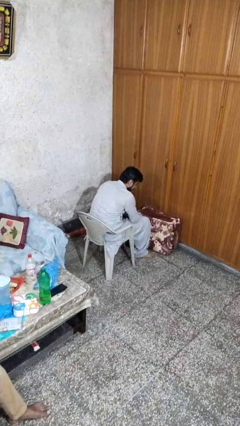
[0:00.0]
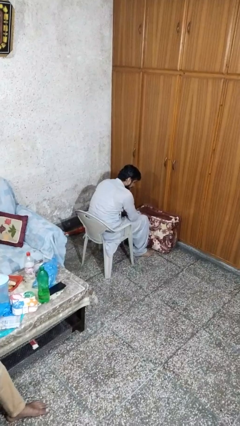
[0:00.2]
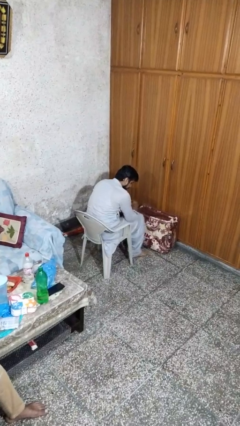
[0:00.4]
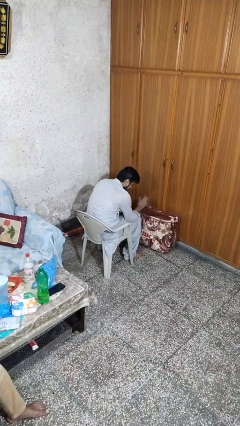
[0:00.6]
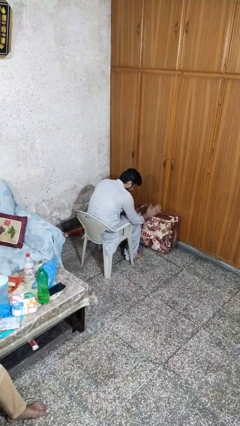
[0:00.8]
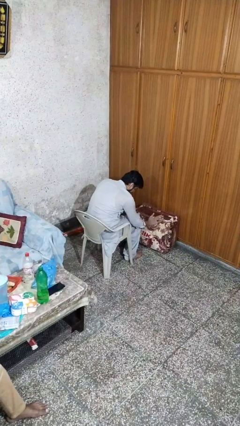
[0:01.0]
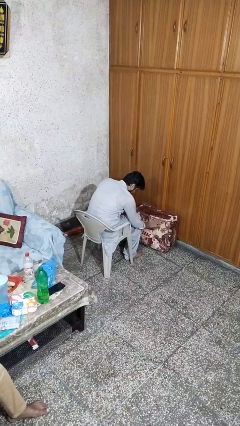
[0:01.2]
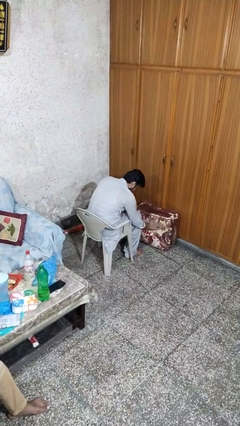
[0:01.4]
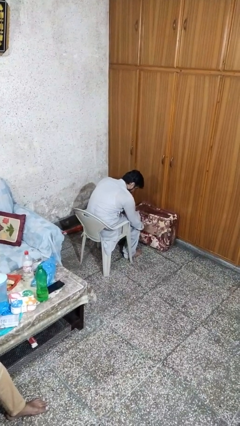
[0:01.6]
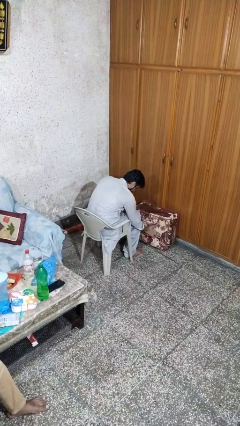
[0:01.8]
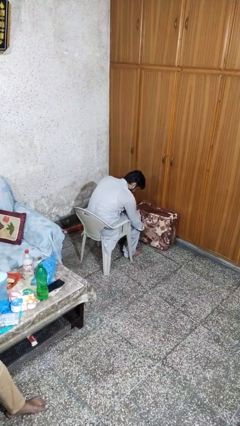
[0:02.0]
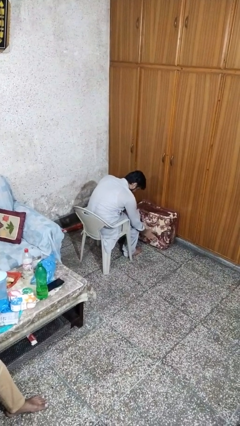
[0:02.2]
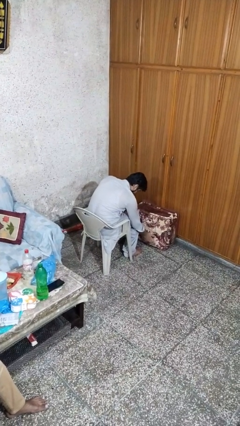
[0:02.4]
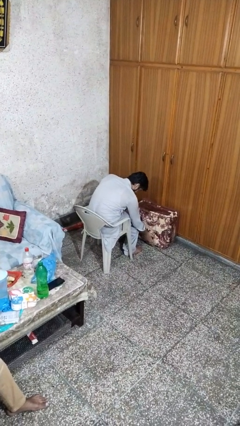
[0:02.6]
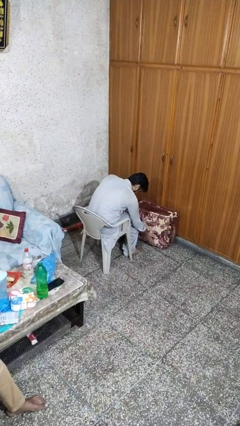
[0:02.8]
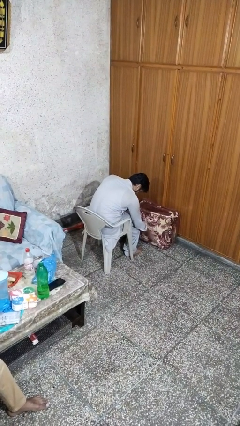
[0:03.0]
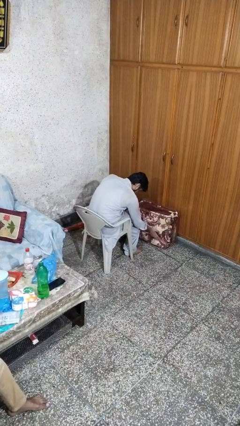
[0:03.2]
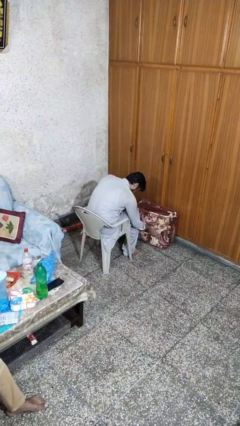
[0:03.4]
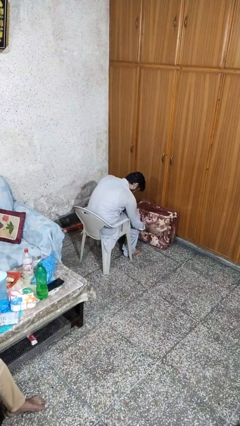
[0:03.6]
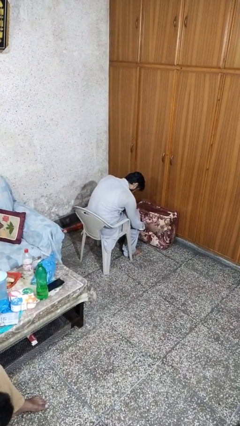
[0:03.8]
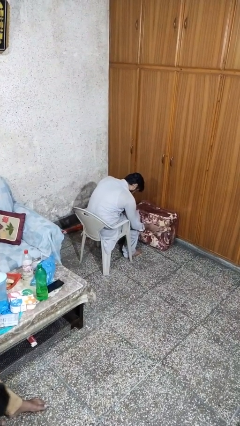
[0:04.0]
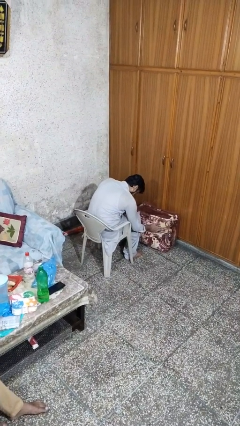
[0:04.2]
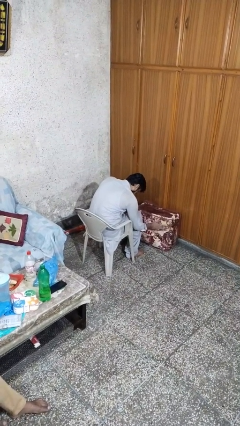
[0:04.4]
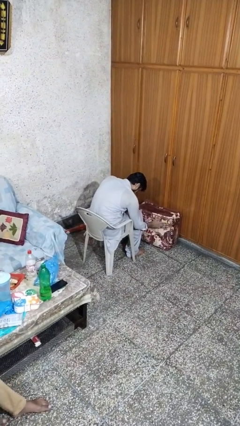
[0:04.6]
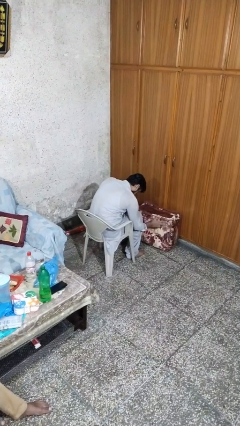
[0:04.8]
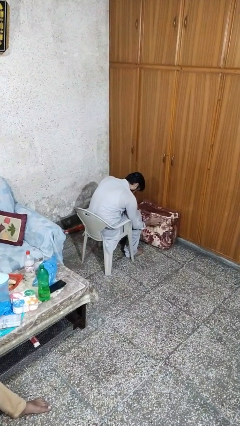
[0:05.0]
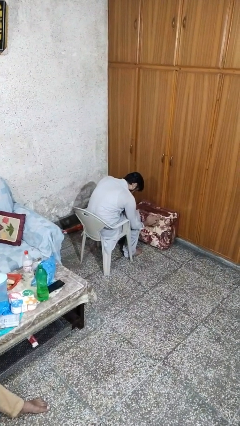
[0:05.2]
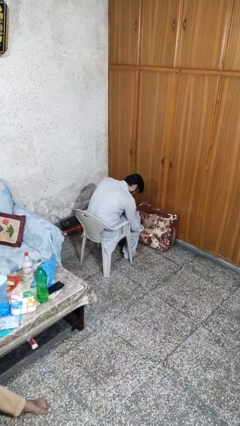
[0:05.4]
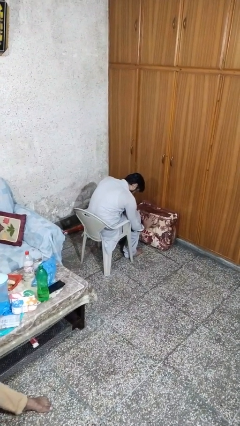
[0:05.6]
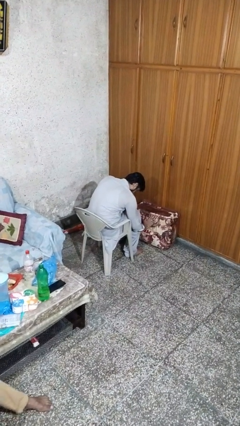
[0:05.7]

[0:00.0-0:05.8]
person waves hand over object

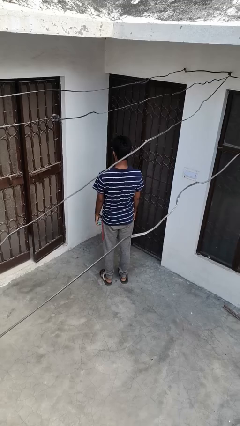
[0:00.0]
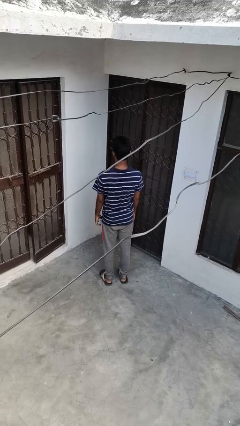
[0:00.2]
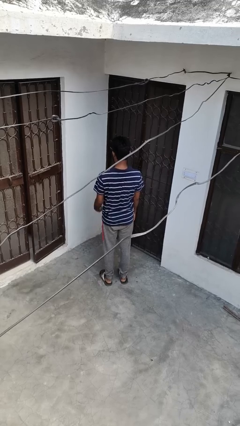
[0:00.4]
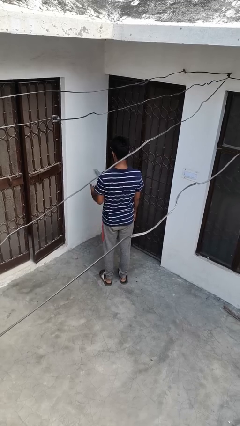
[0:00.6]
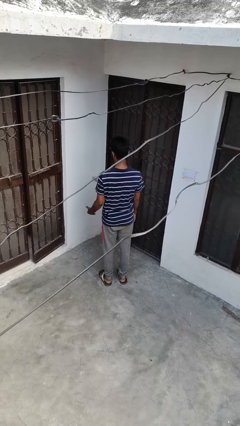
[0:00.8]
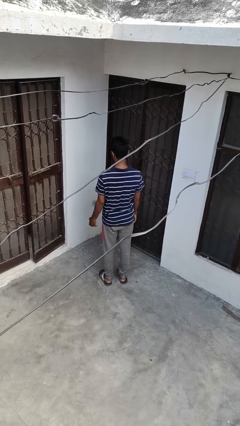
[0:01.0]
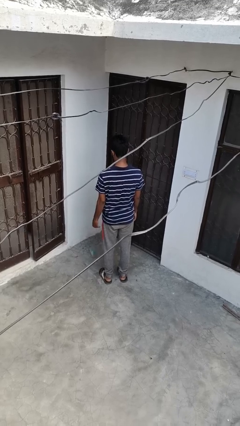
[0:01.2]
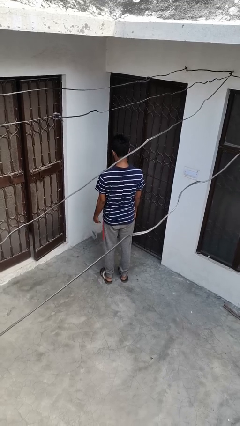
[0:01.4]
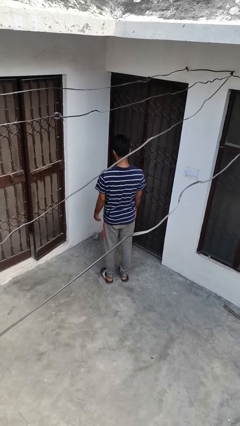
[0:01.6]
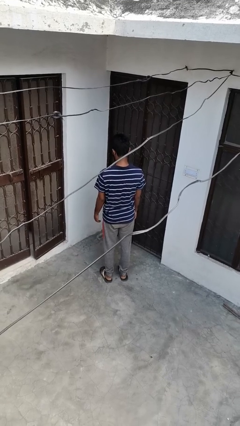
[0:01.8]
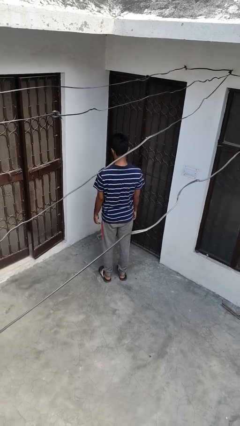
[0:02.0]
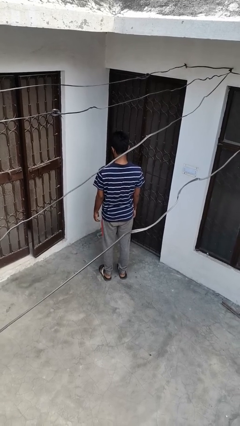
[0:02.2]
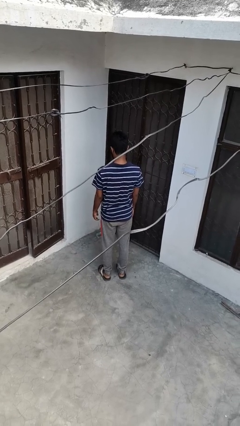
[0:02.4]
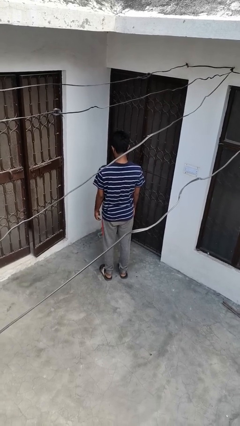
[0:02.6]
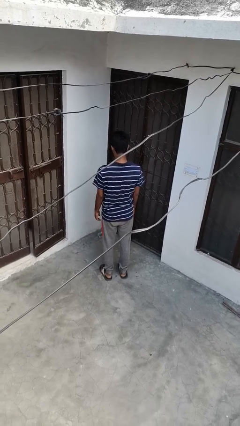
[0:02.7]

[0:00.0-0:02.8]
person throws object into air

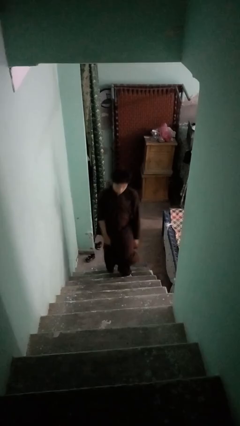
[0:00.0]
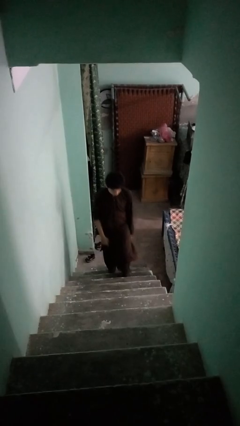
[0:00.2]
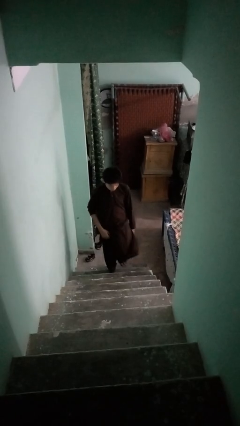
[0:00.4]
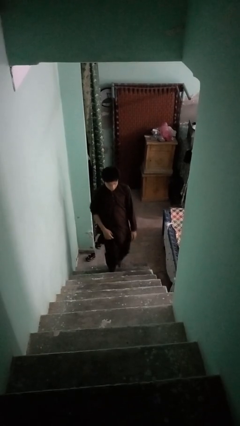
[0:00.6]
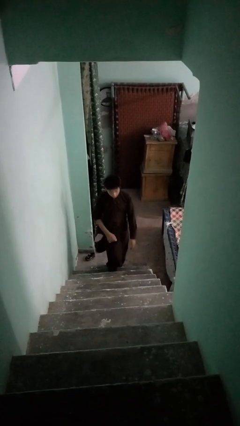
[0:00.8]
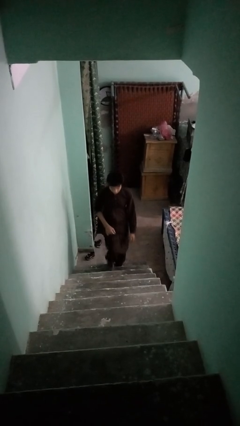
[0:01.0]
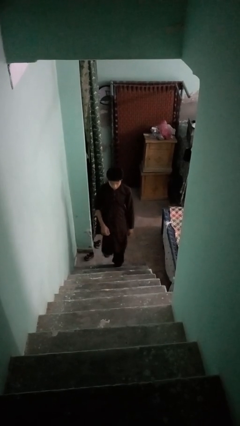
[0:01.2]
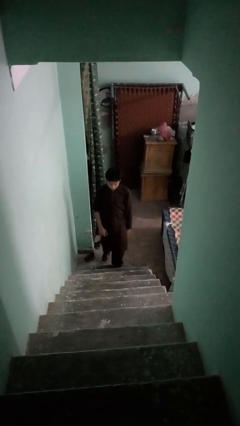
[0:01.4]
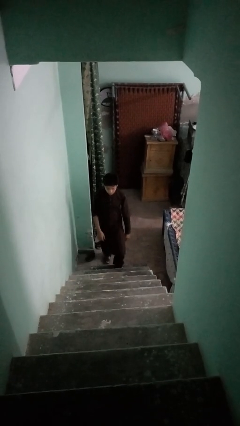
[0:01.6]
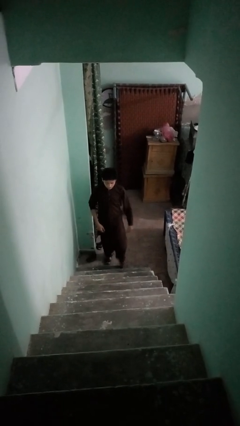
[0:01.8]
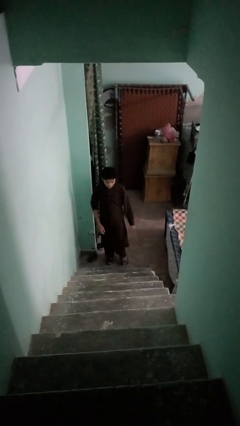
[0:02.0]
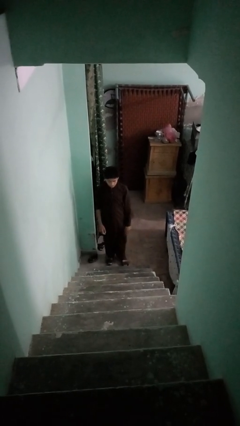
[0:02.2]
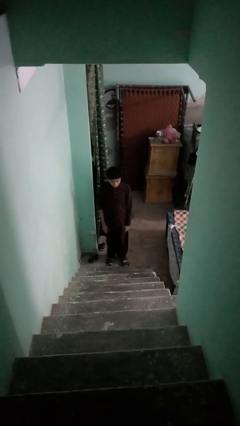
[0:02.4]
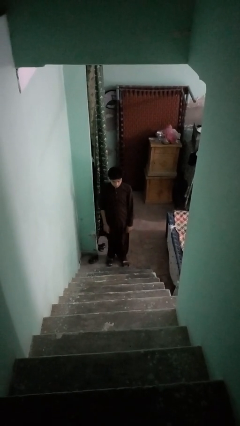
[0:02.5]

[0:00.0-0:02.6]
person climbs down stairs

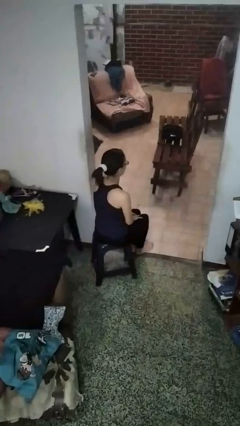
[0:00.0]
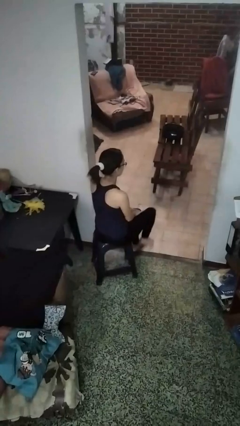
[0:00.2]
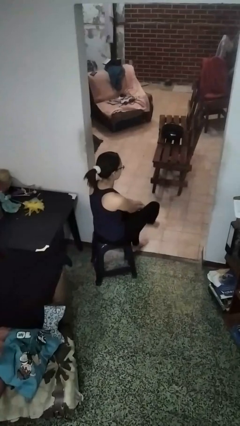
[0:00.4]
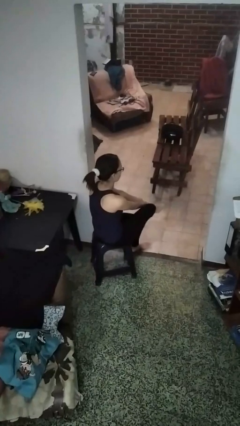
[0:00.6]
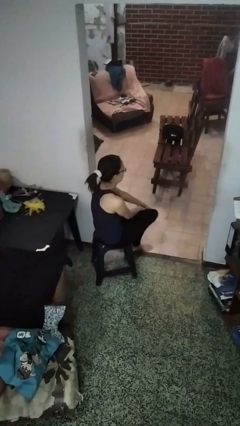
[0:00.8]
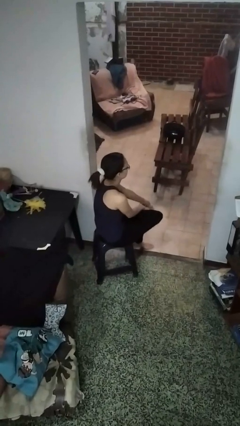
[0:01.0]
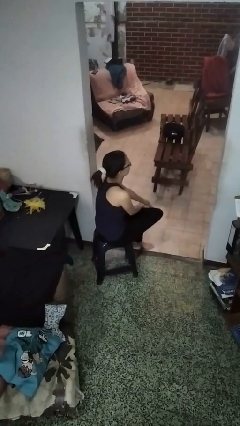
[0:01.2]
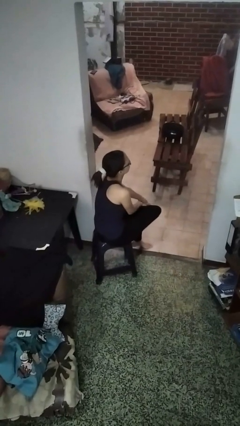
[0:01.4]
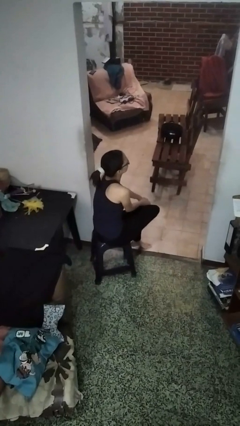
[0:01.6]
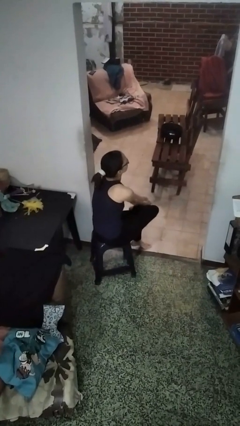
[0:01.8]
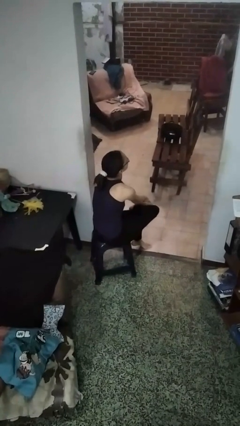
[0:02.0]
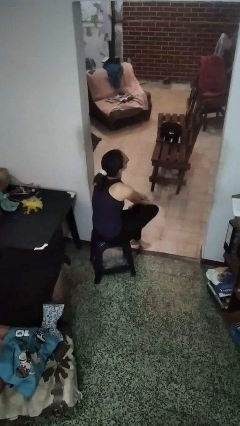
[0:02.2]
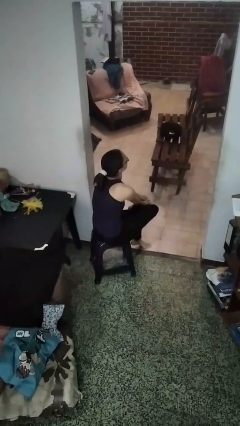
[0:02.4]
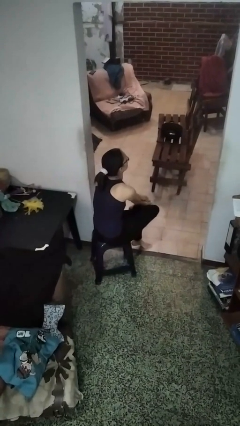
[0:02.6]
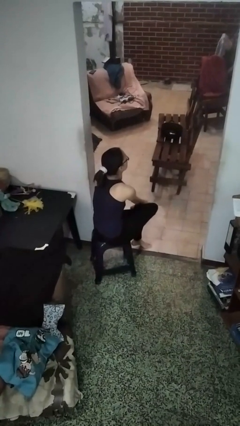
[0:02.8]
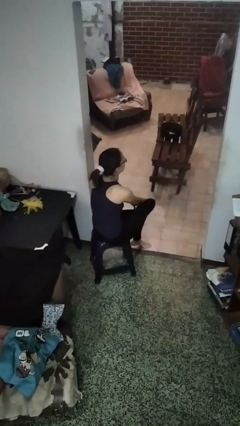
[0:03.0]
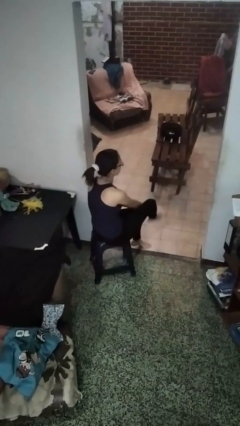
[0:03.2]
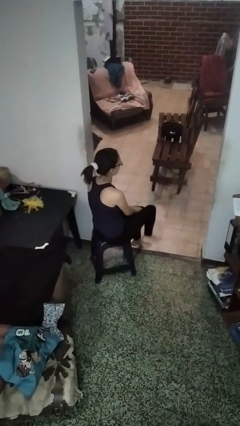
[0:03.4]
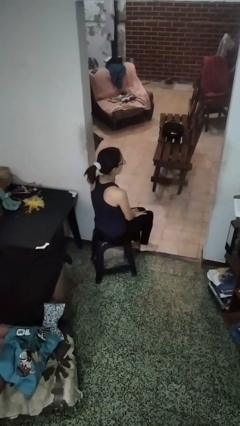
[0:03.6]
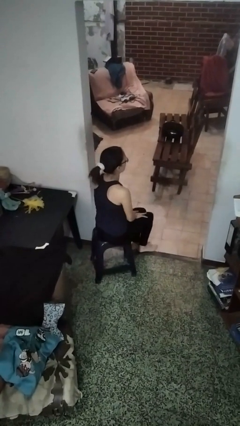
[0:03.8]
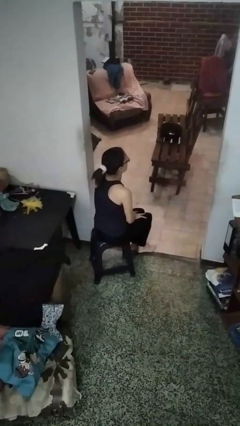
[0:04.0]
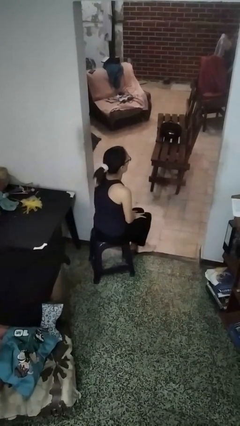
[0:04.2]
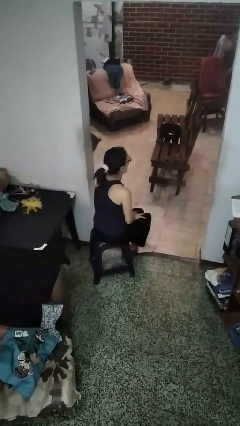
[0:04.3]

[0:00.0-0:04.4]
person rubs foot

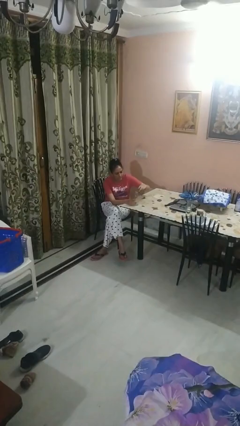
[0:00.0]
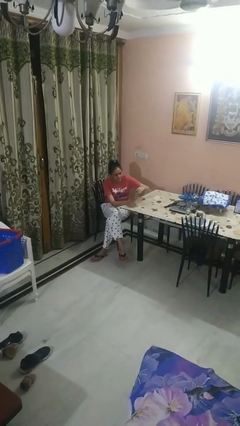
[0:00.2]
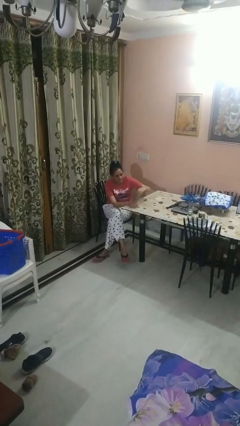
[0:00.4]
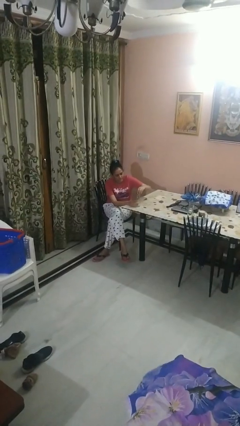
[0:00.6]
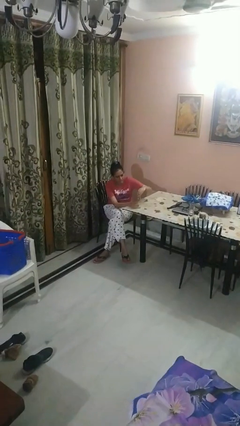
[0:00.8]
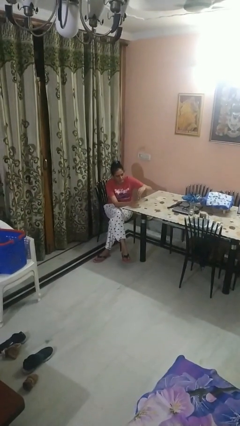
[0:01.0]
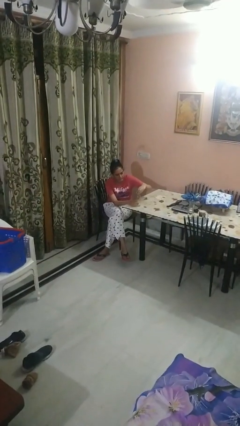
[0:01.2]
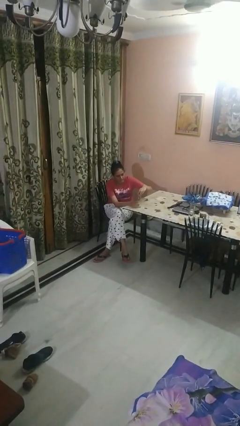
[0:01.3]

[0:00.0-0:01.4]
person screws lid to bottle

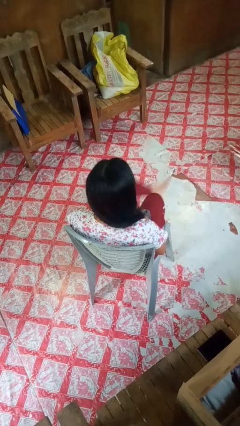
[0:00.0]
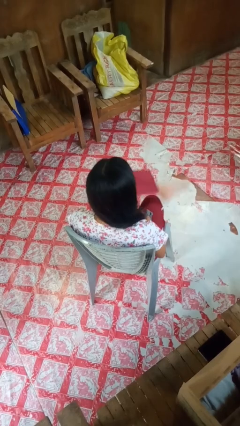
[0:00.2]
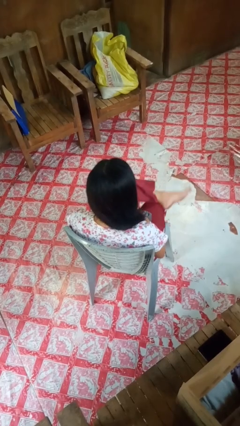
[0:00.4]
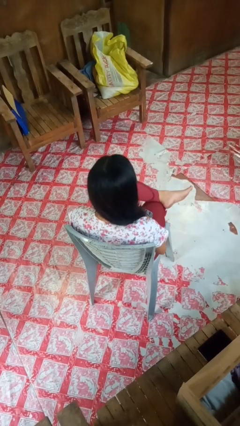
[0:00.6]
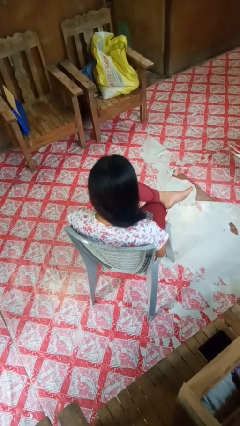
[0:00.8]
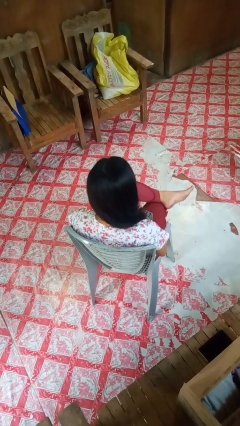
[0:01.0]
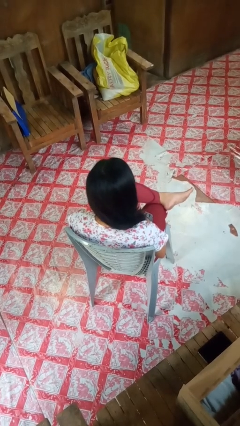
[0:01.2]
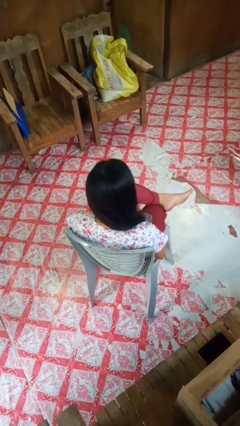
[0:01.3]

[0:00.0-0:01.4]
person crosses legs
